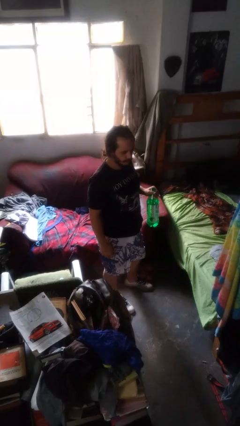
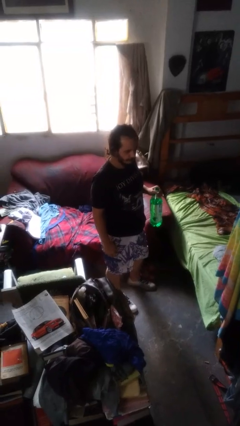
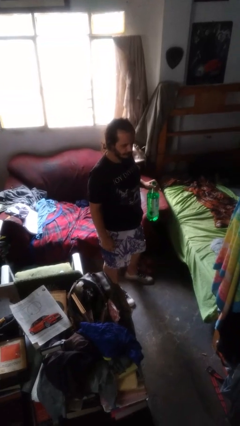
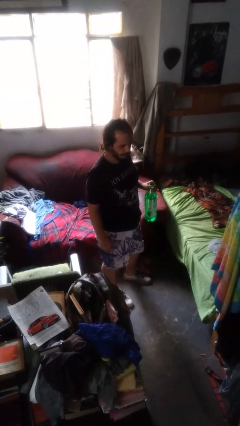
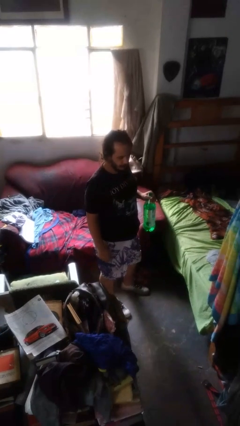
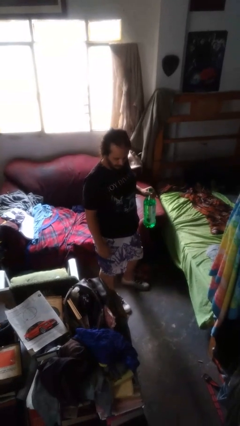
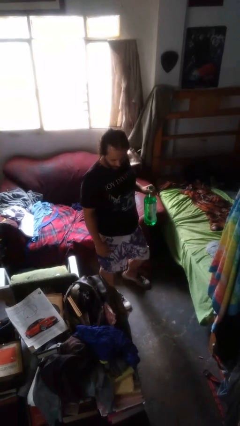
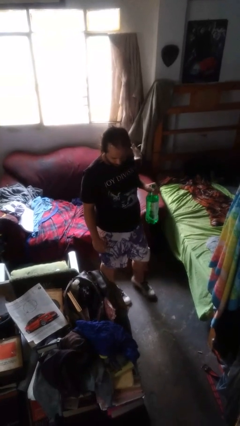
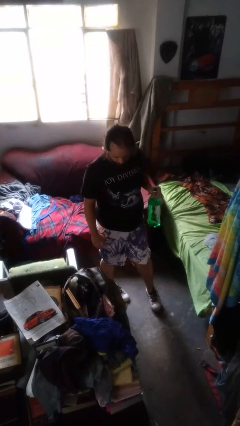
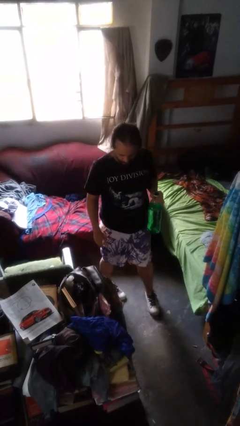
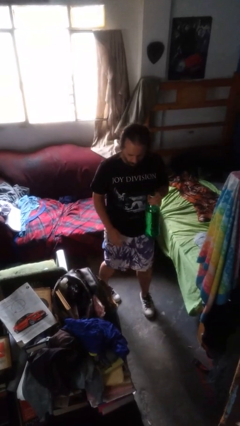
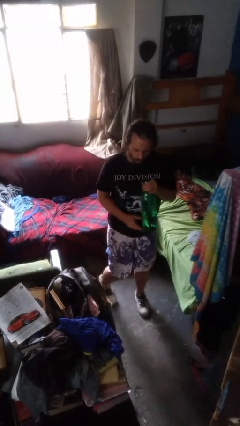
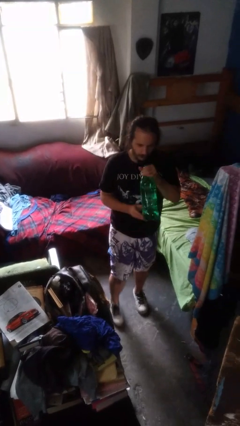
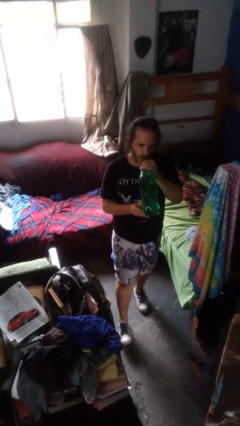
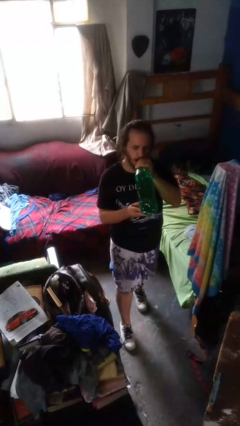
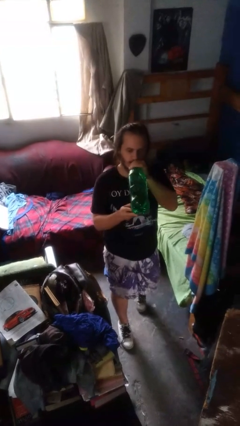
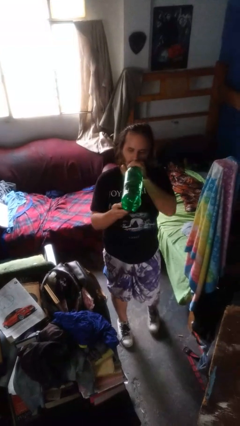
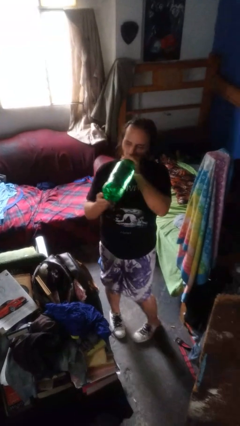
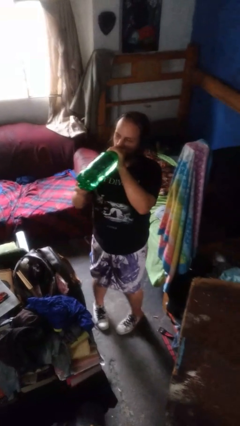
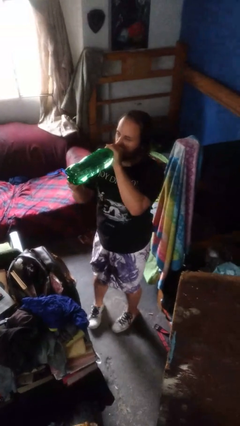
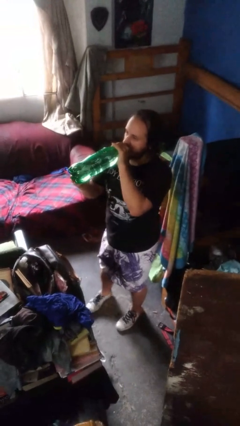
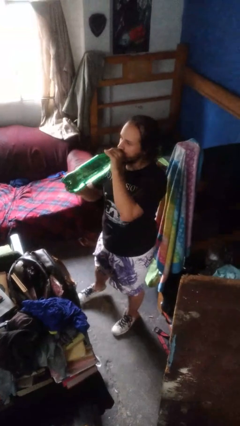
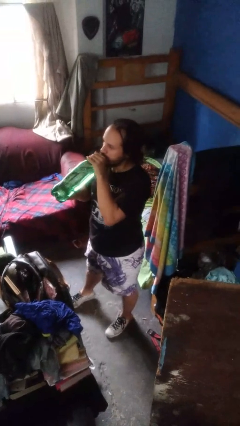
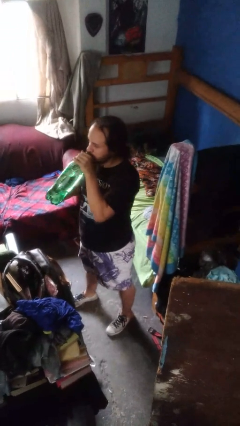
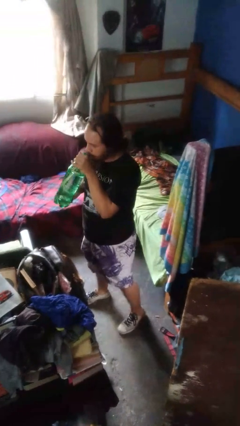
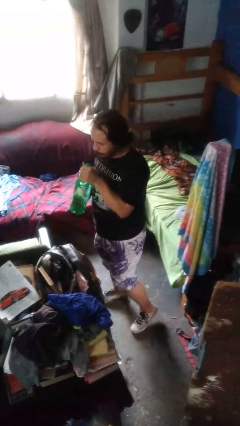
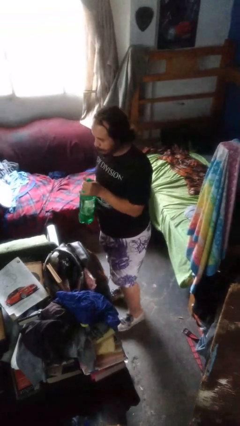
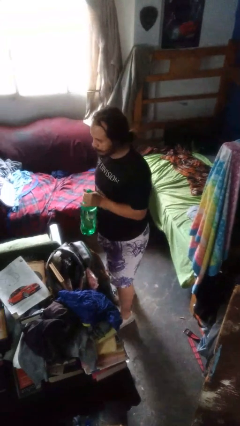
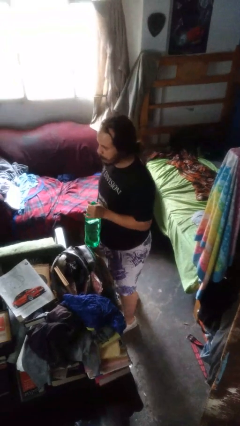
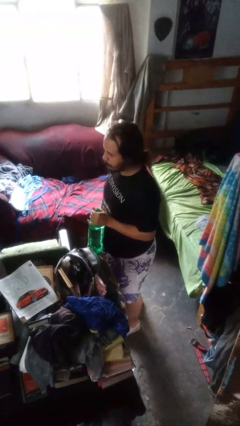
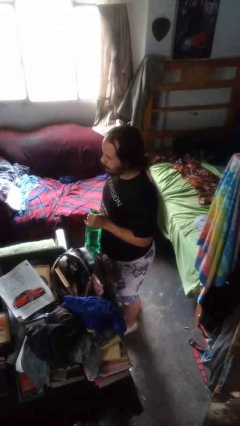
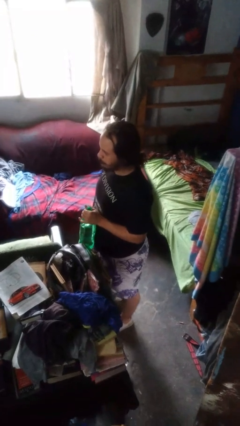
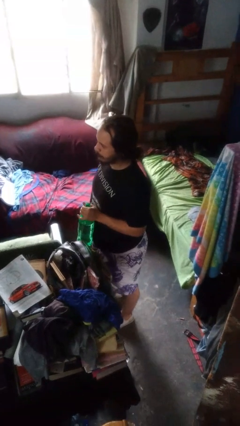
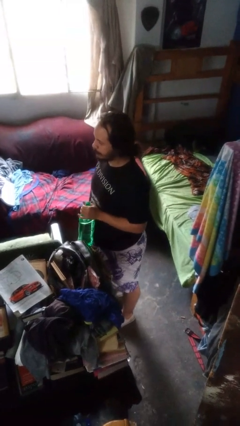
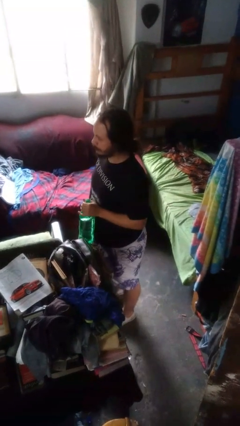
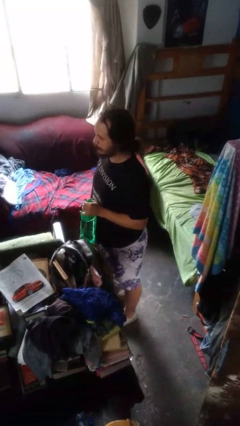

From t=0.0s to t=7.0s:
person drinks from bottle

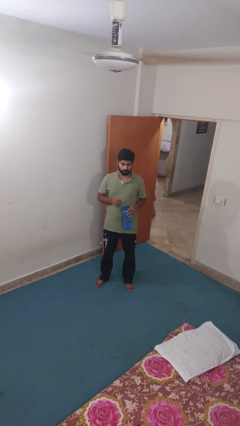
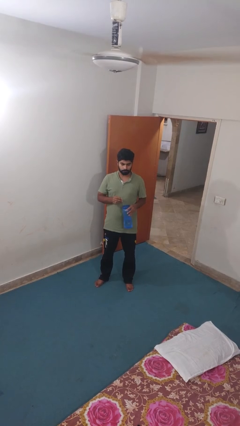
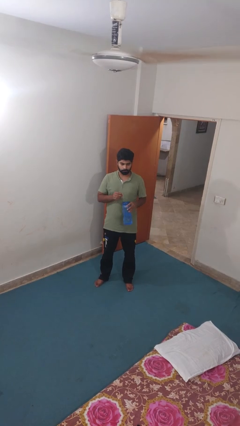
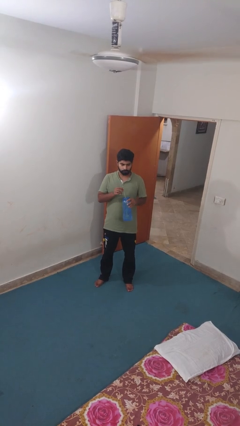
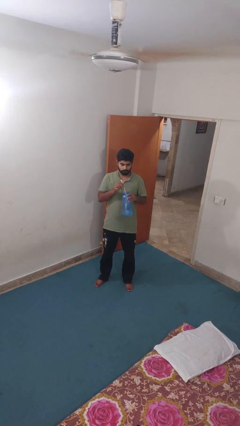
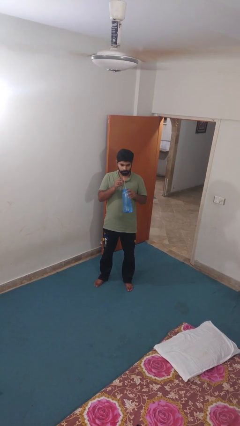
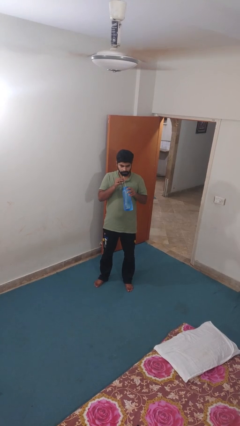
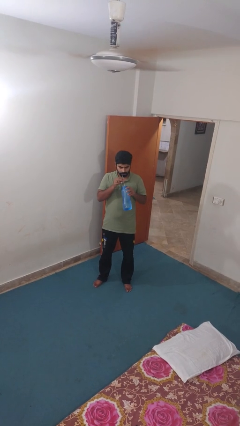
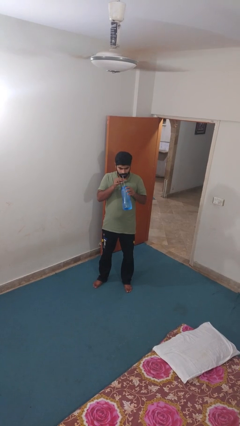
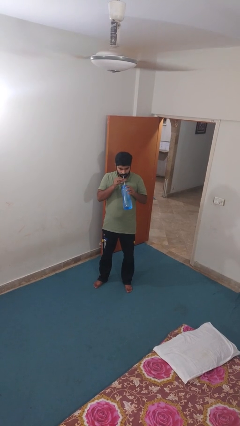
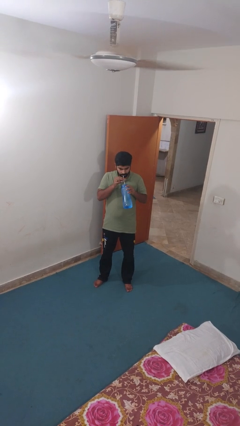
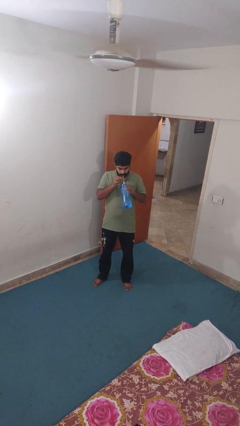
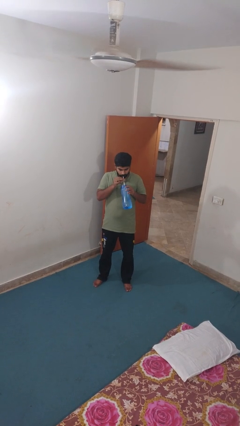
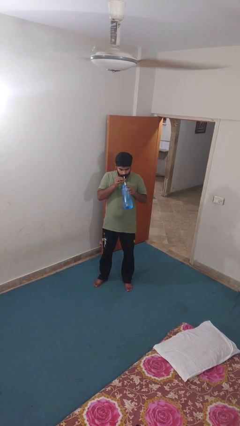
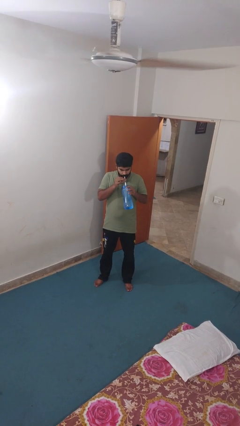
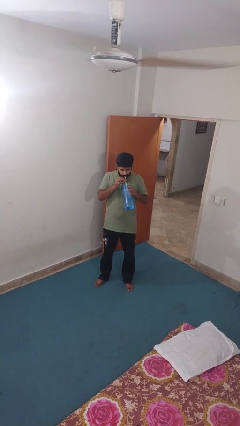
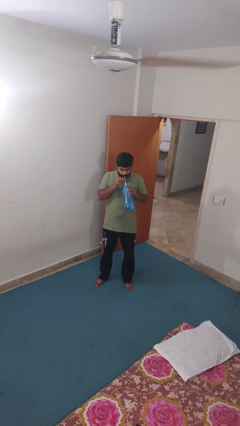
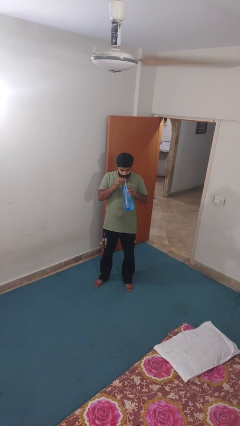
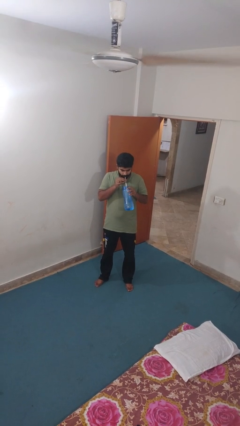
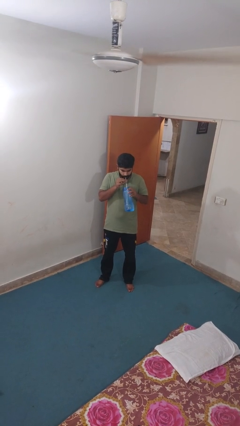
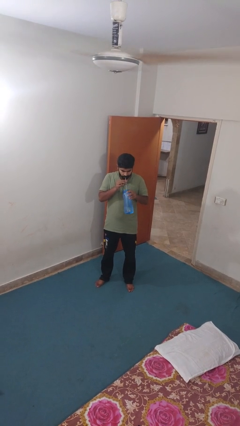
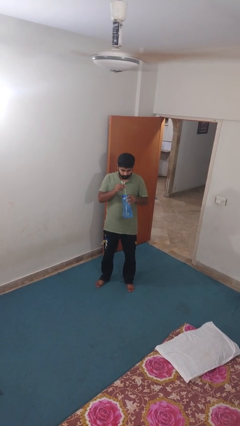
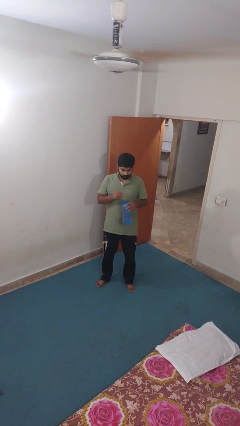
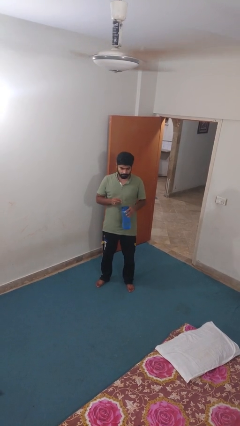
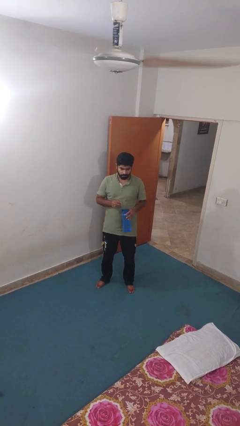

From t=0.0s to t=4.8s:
person drinks from straw

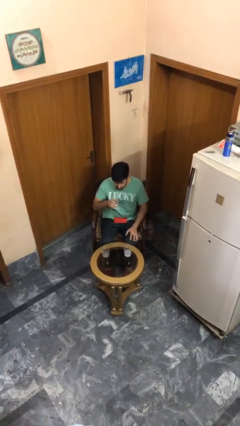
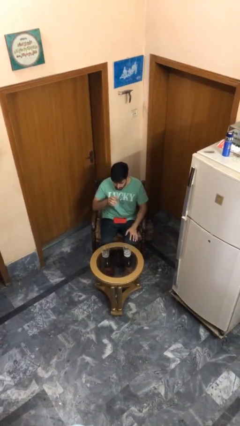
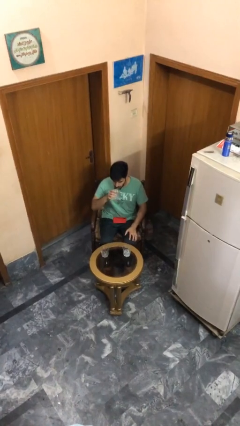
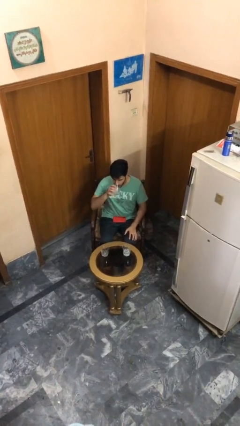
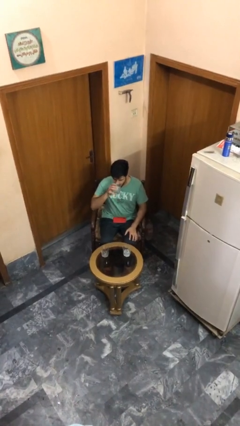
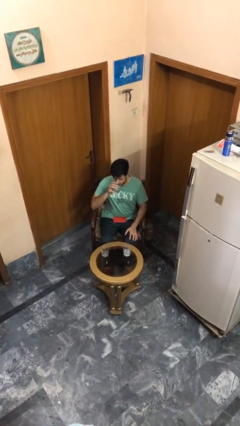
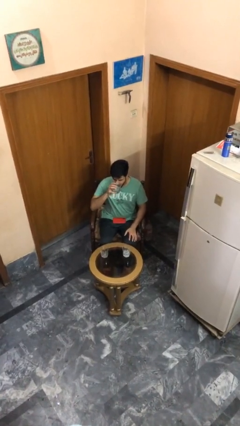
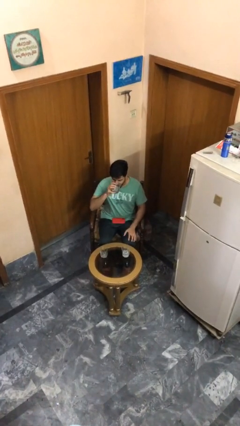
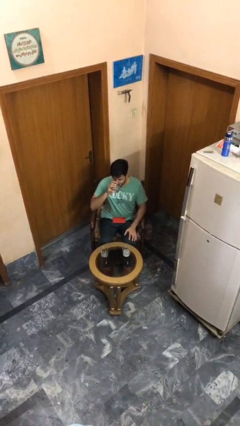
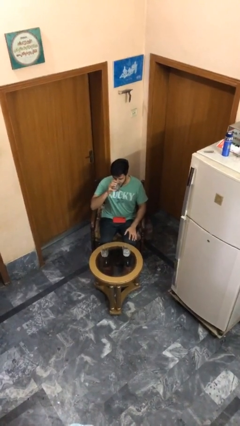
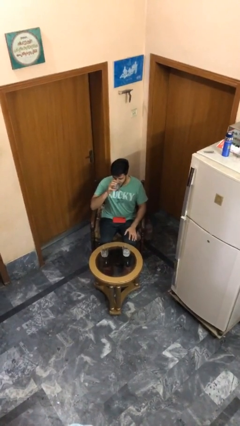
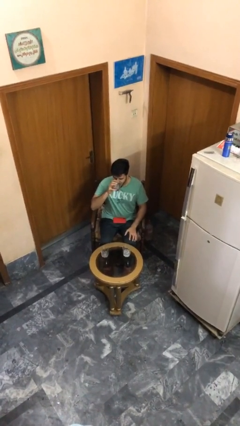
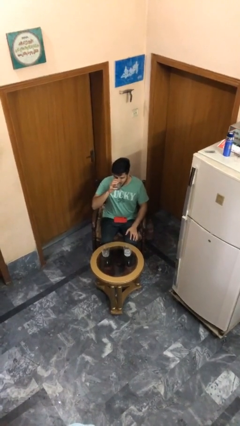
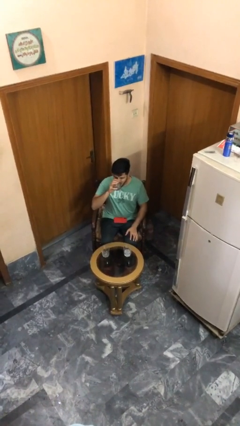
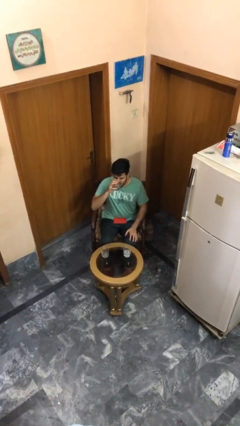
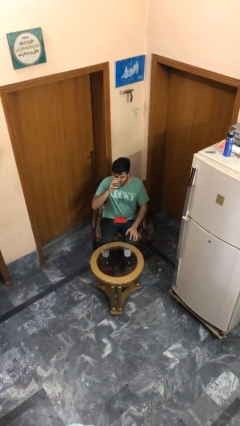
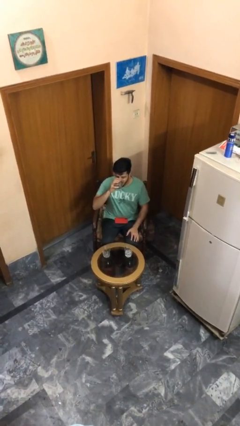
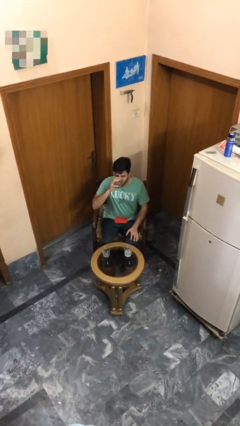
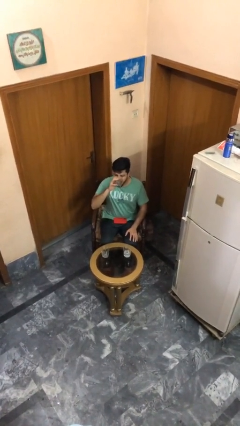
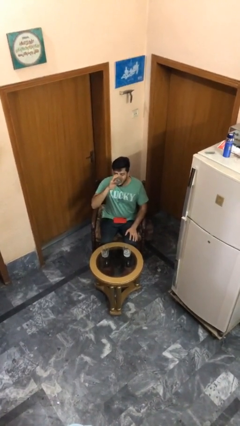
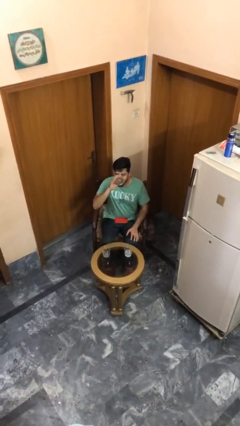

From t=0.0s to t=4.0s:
person drinks from shotglass

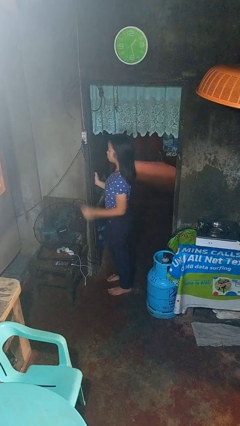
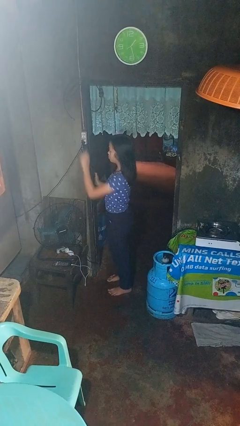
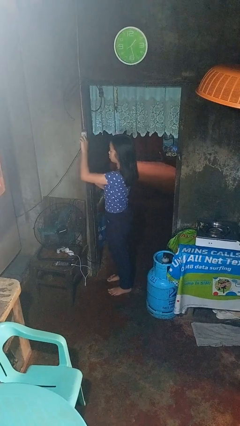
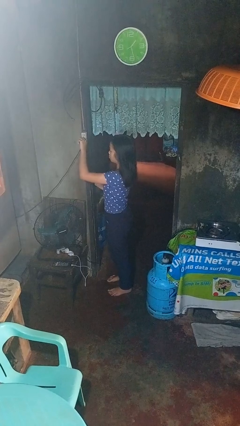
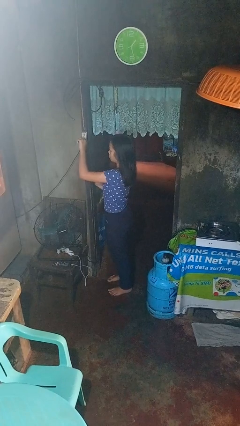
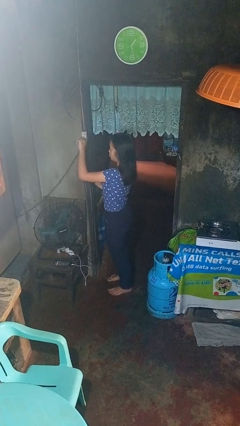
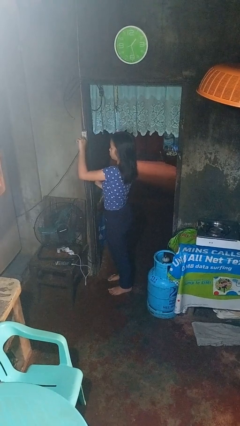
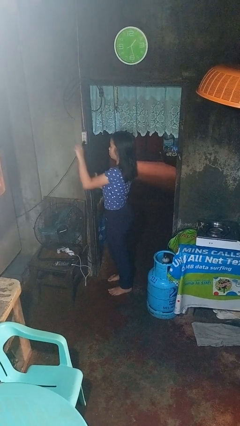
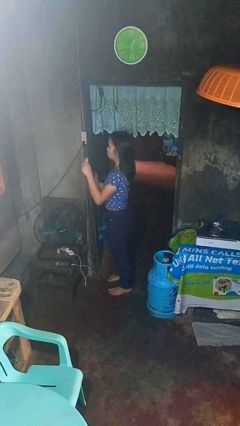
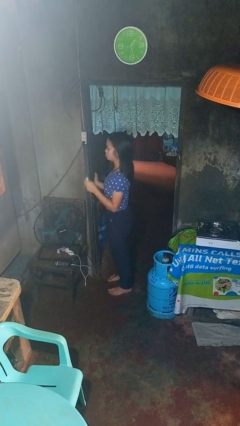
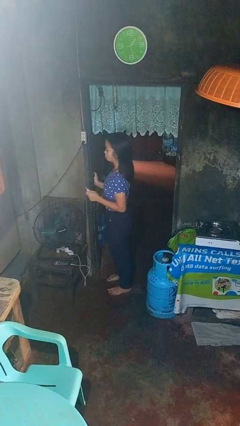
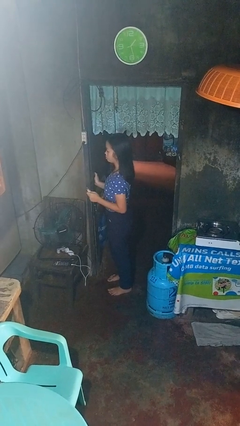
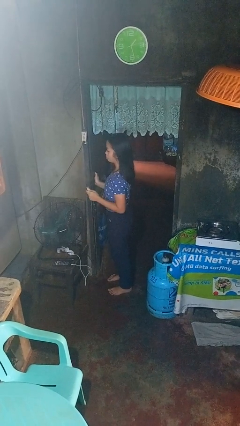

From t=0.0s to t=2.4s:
person unplugs from electrical socket
